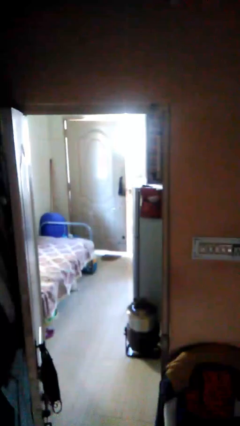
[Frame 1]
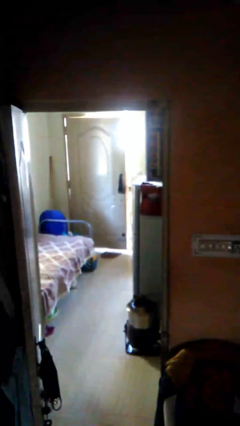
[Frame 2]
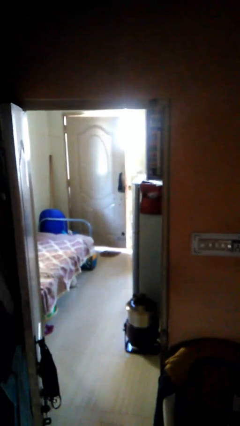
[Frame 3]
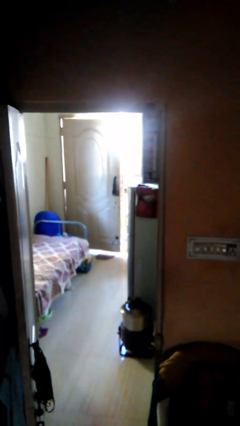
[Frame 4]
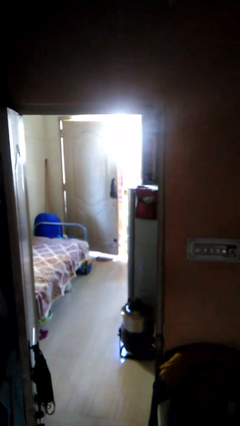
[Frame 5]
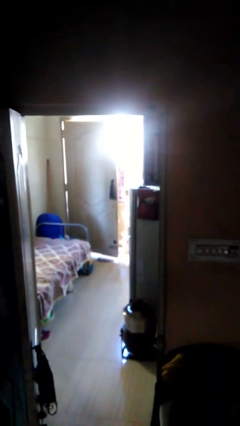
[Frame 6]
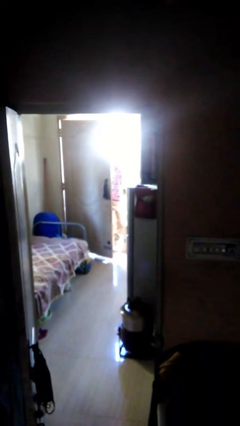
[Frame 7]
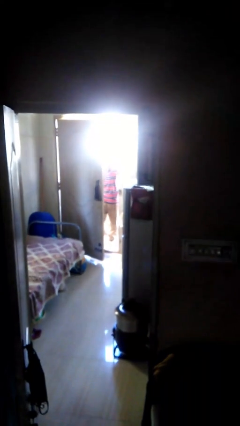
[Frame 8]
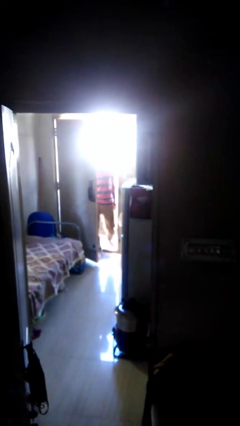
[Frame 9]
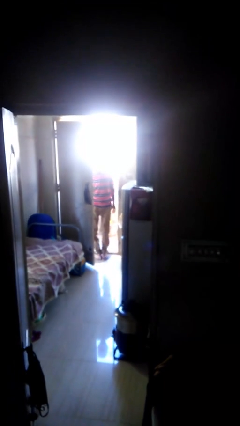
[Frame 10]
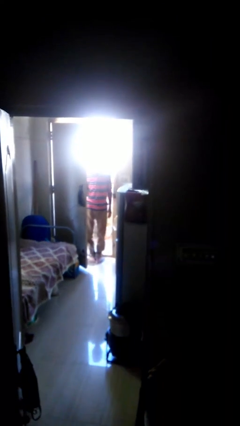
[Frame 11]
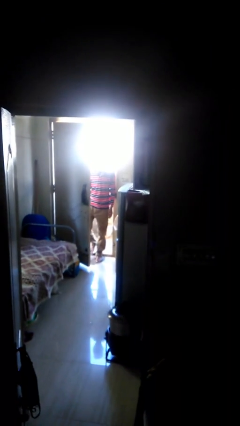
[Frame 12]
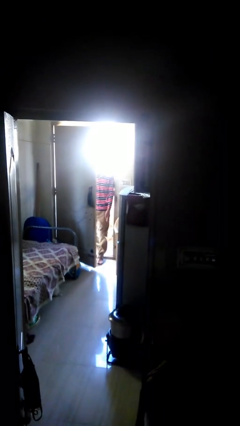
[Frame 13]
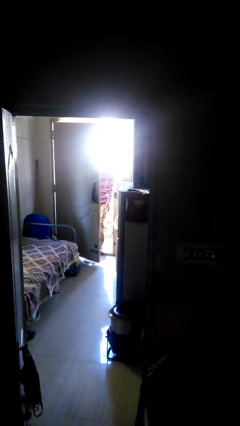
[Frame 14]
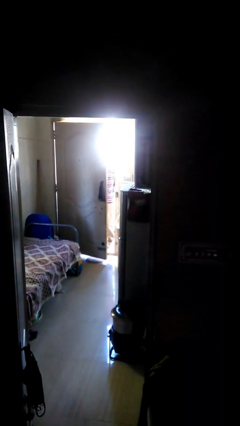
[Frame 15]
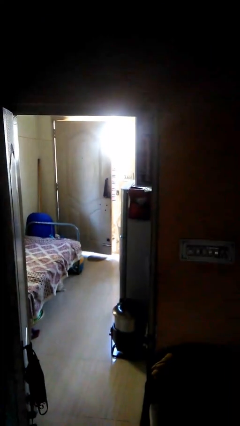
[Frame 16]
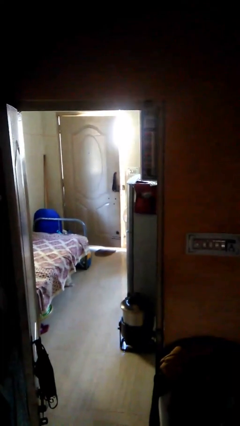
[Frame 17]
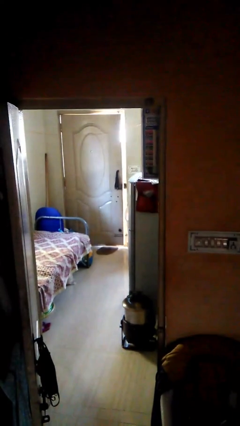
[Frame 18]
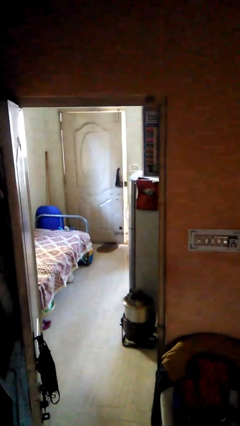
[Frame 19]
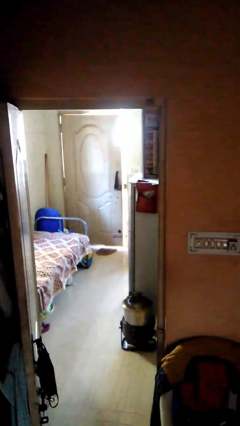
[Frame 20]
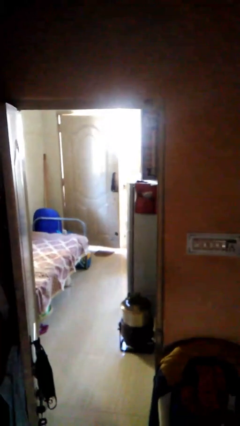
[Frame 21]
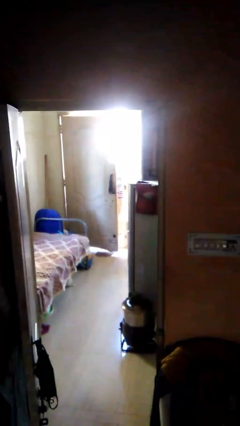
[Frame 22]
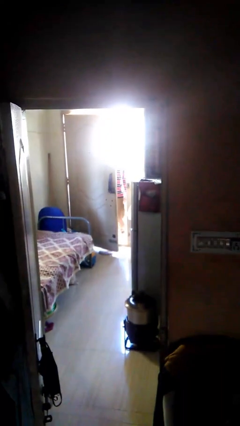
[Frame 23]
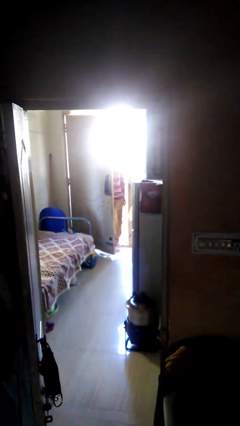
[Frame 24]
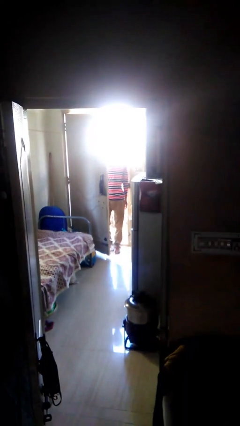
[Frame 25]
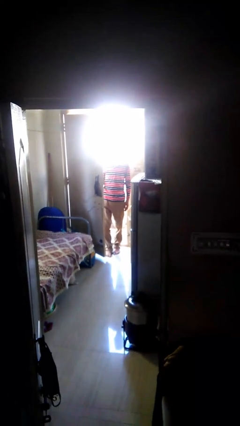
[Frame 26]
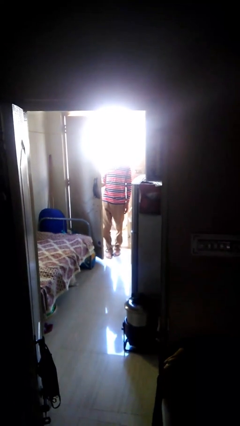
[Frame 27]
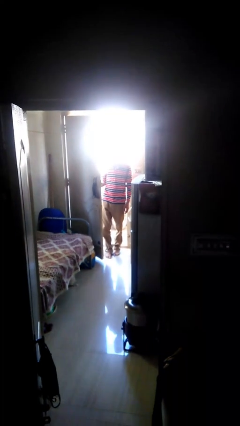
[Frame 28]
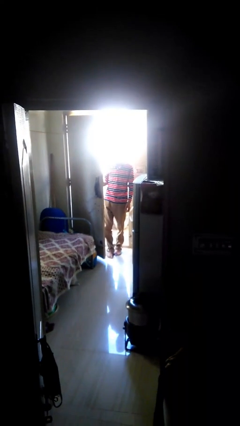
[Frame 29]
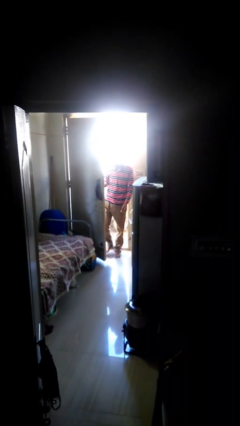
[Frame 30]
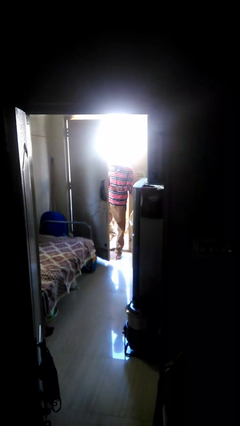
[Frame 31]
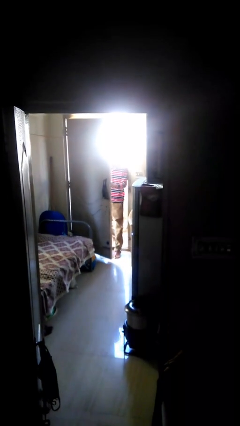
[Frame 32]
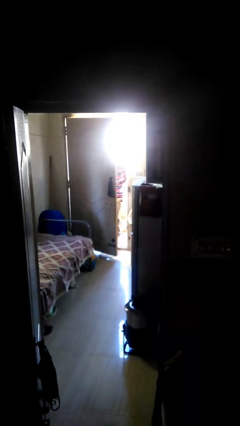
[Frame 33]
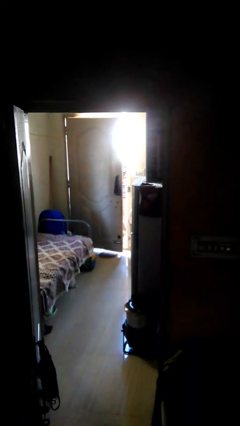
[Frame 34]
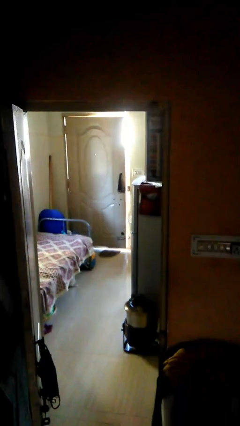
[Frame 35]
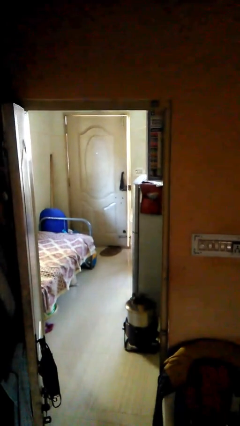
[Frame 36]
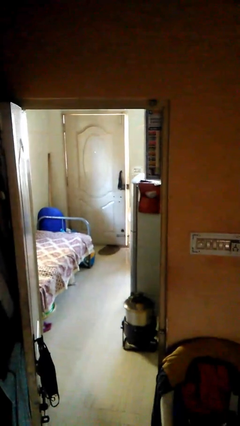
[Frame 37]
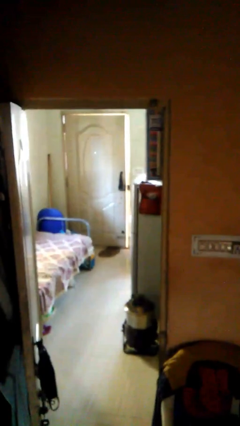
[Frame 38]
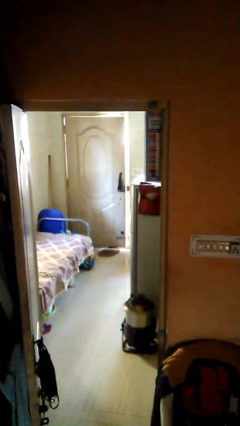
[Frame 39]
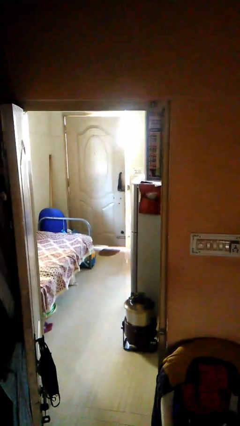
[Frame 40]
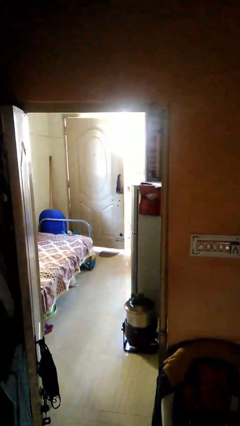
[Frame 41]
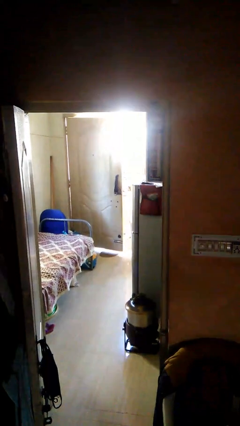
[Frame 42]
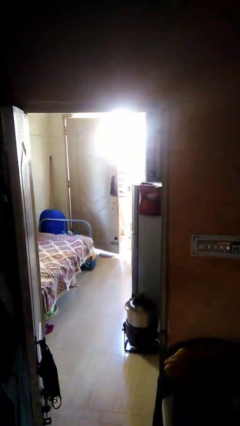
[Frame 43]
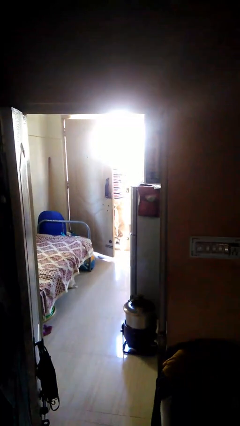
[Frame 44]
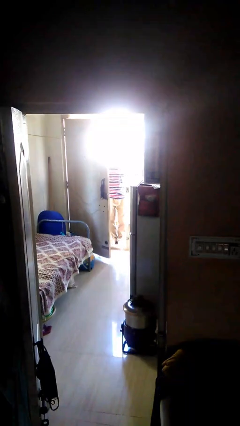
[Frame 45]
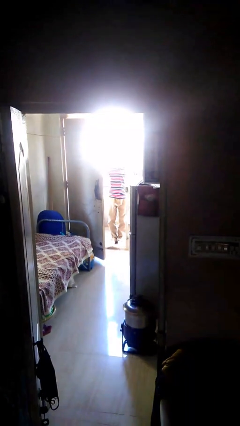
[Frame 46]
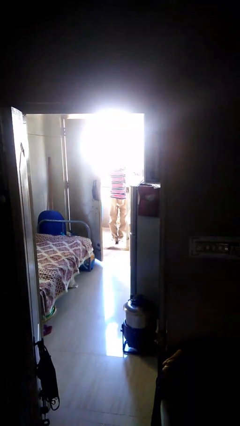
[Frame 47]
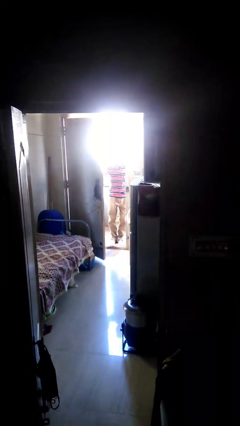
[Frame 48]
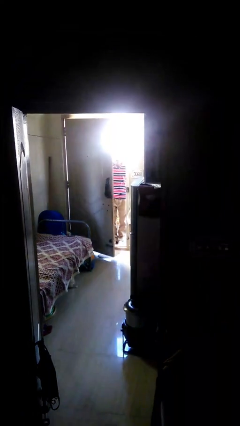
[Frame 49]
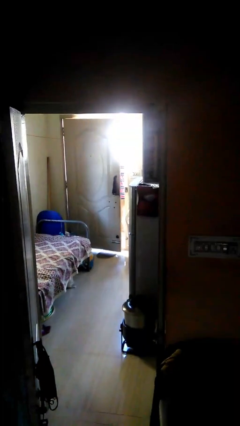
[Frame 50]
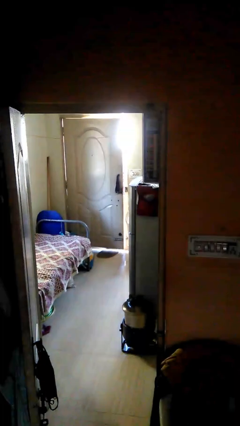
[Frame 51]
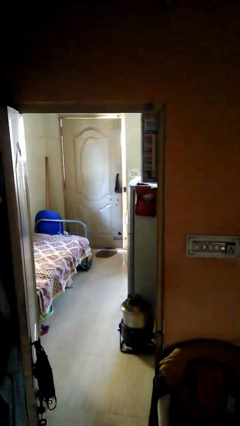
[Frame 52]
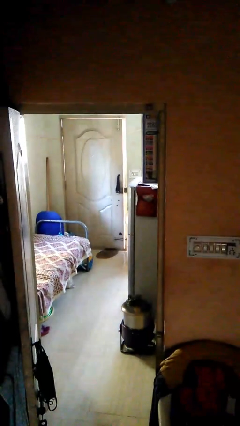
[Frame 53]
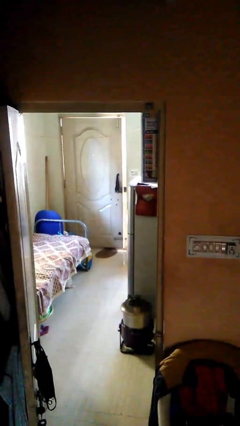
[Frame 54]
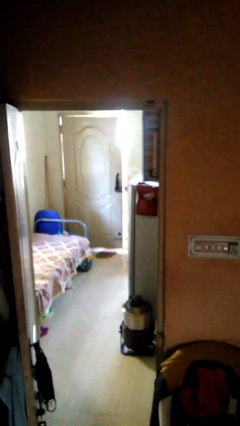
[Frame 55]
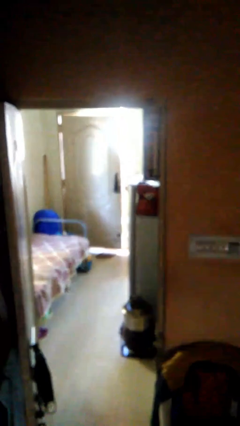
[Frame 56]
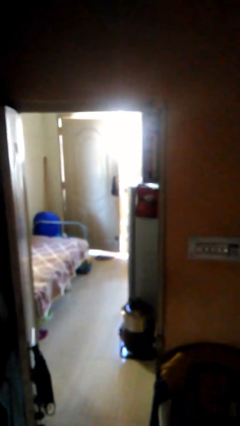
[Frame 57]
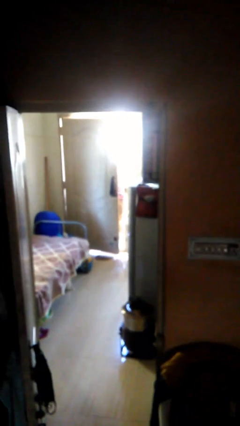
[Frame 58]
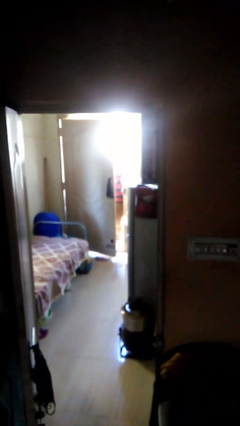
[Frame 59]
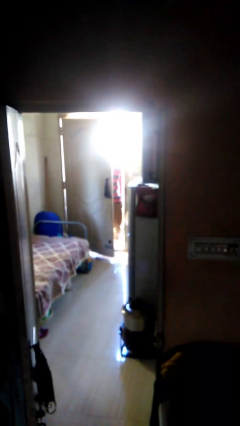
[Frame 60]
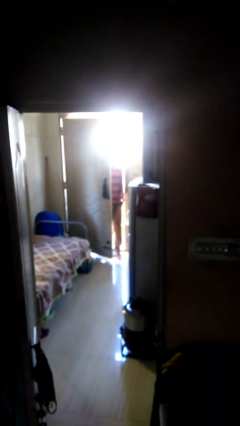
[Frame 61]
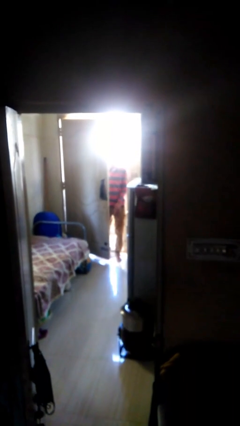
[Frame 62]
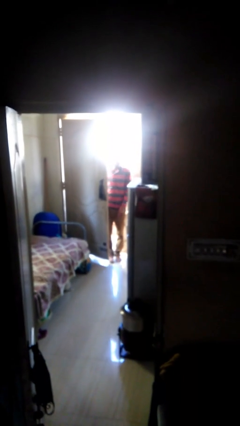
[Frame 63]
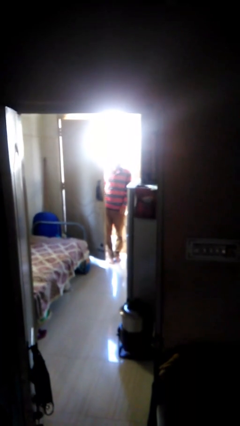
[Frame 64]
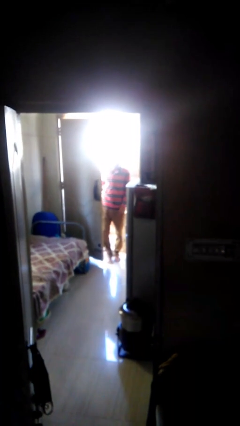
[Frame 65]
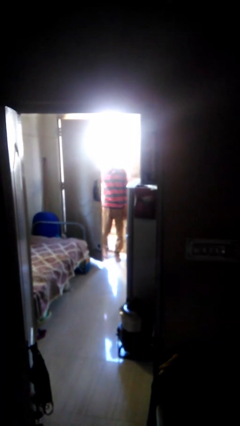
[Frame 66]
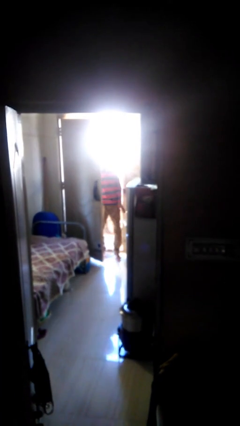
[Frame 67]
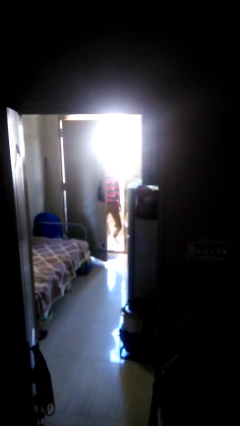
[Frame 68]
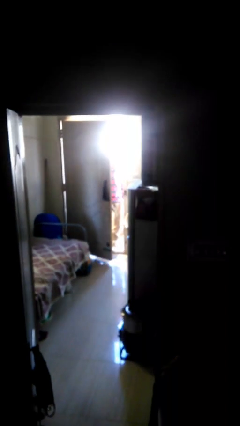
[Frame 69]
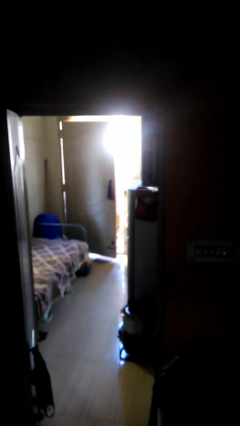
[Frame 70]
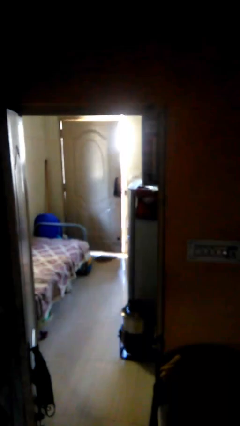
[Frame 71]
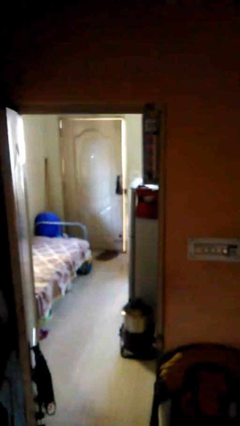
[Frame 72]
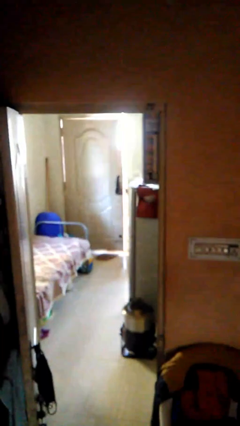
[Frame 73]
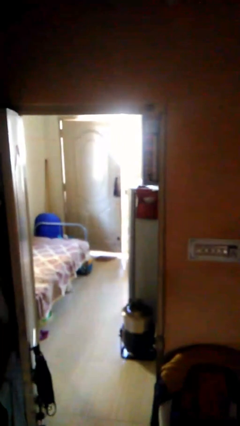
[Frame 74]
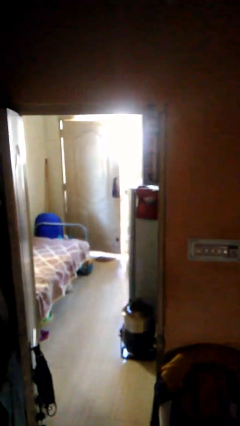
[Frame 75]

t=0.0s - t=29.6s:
person opens facility door

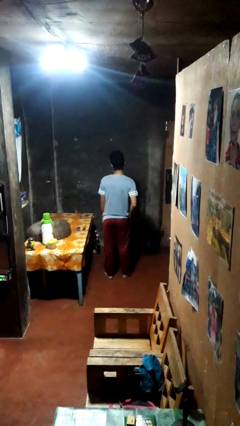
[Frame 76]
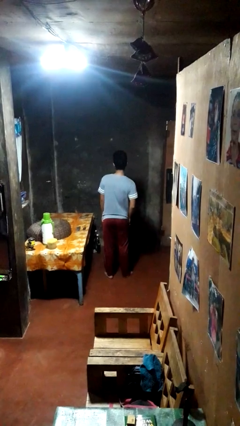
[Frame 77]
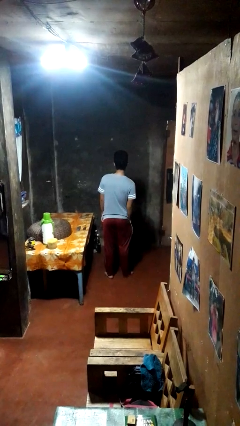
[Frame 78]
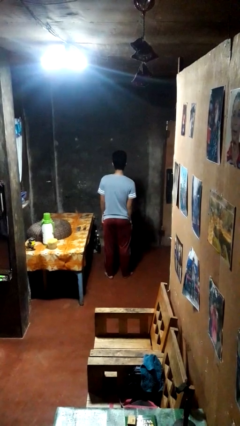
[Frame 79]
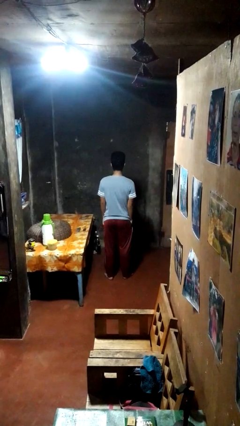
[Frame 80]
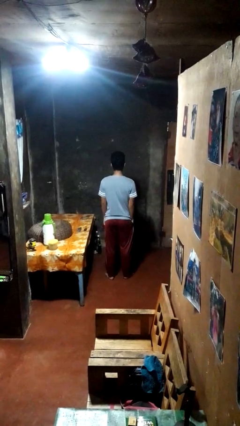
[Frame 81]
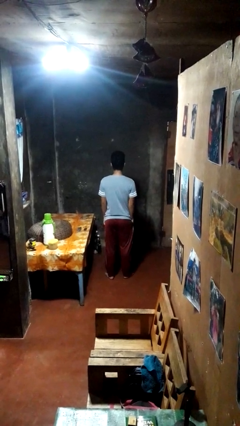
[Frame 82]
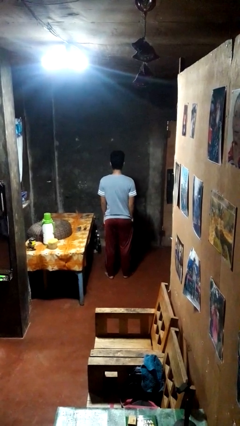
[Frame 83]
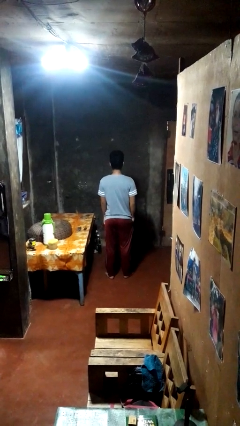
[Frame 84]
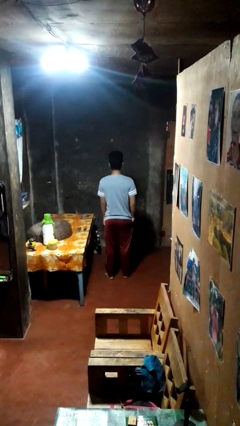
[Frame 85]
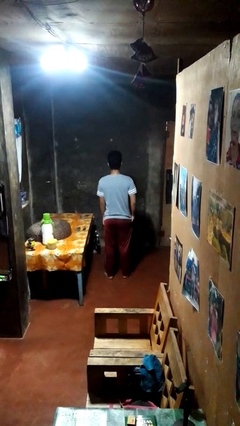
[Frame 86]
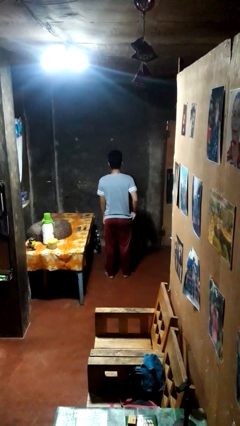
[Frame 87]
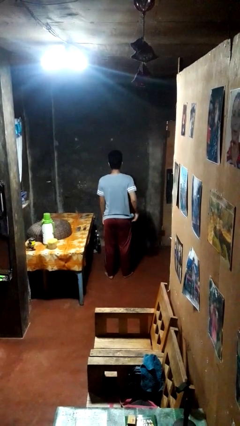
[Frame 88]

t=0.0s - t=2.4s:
person puts hands in back pockets

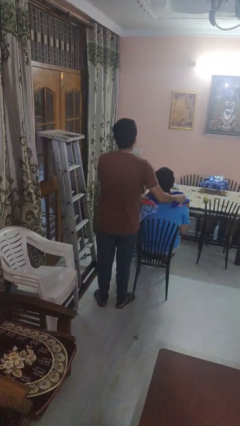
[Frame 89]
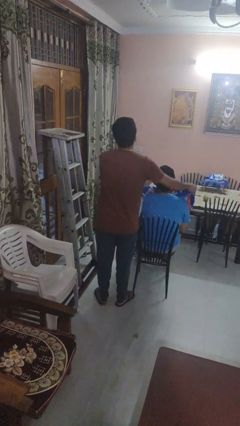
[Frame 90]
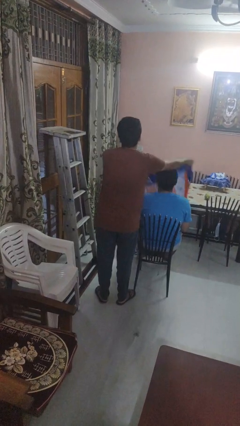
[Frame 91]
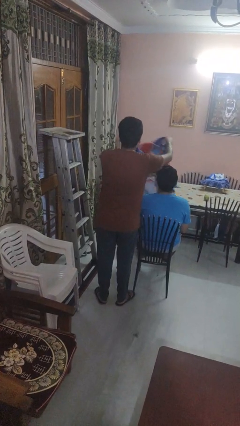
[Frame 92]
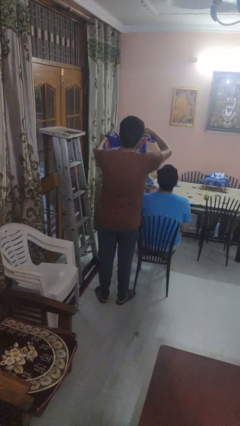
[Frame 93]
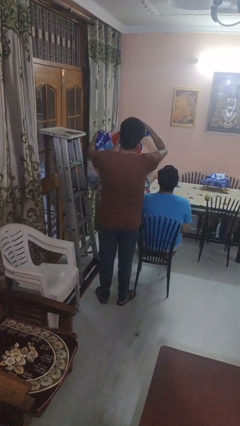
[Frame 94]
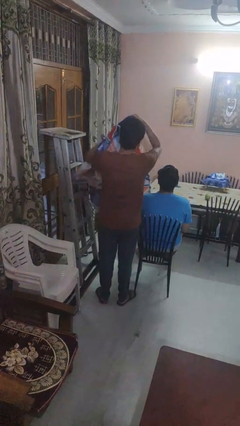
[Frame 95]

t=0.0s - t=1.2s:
person uncovers friend with blanket
